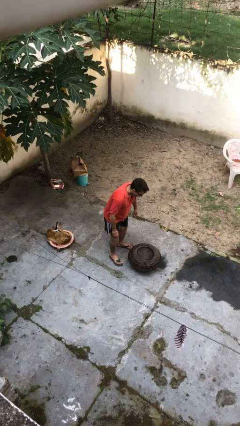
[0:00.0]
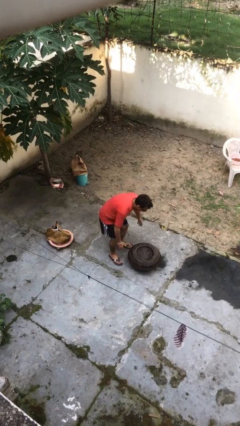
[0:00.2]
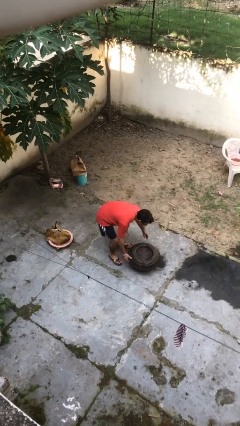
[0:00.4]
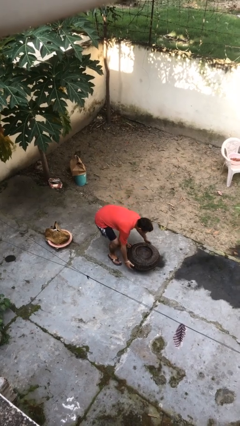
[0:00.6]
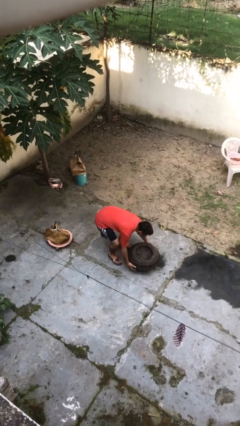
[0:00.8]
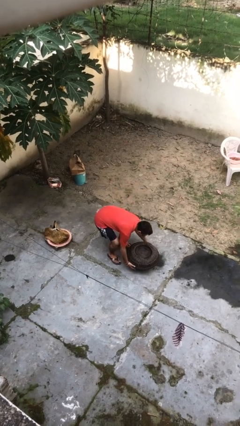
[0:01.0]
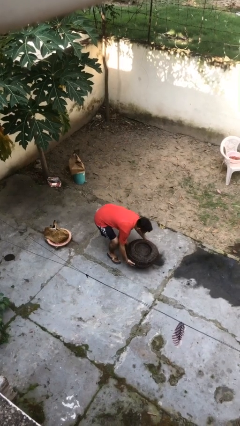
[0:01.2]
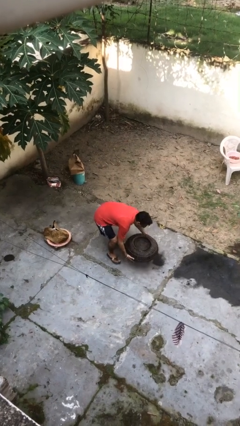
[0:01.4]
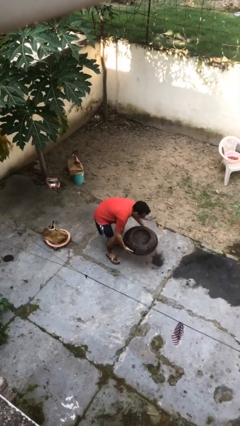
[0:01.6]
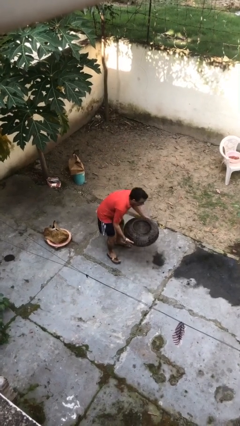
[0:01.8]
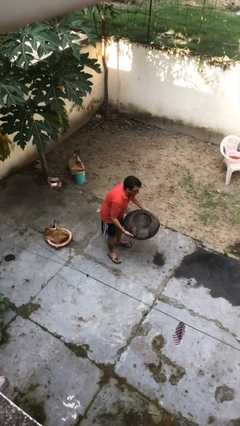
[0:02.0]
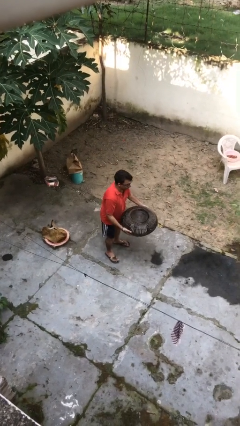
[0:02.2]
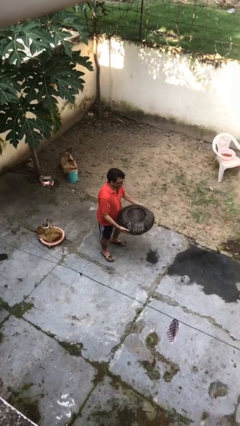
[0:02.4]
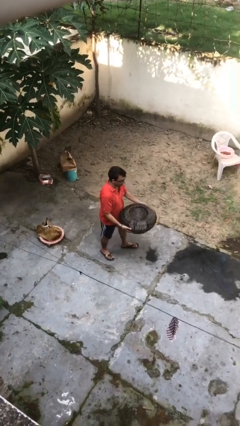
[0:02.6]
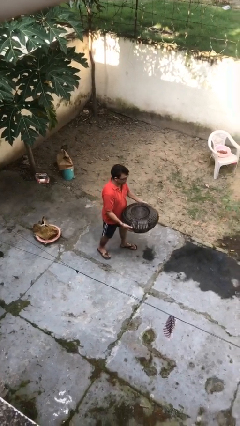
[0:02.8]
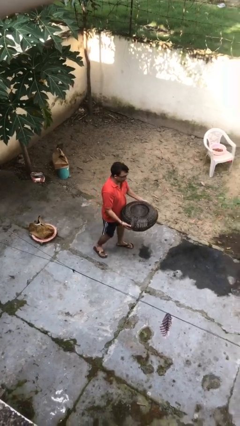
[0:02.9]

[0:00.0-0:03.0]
person picks up object from floor

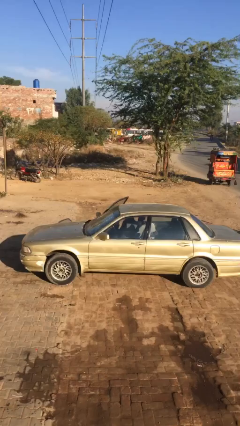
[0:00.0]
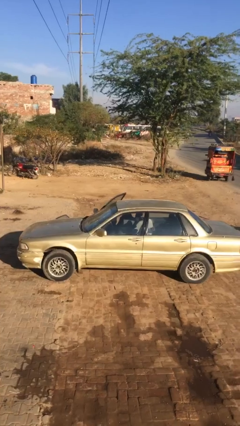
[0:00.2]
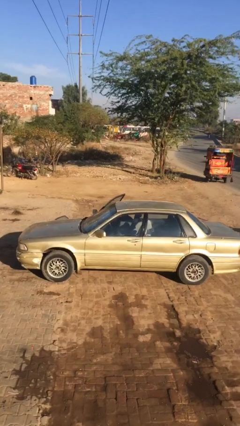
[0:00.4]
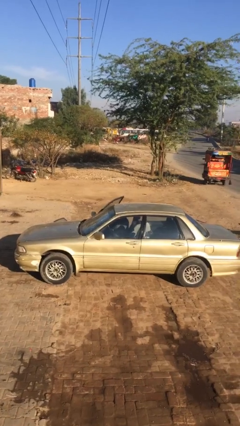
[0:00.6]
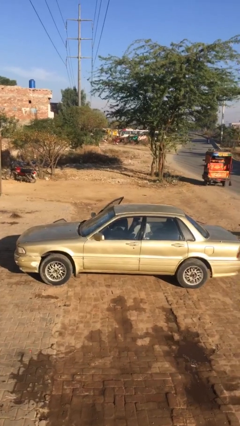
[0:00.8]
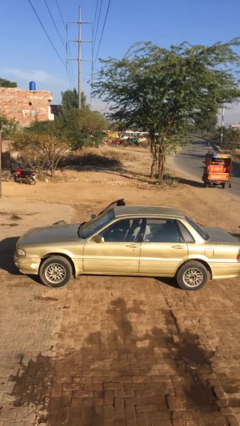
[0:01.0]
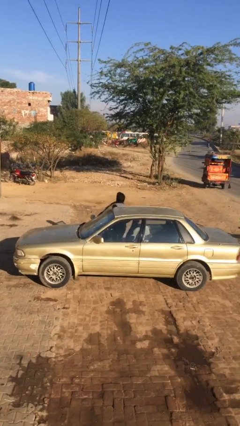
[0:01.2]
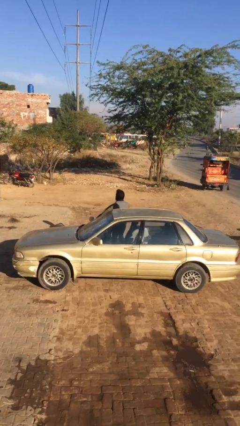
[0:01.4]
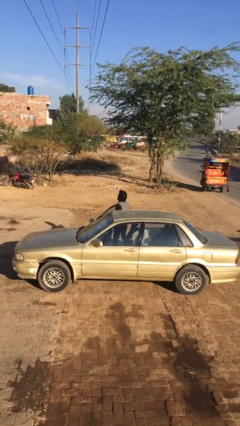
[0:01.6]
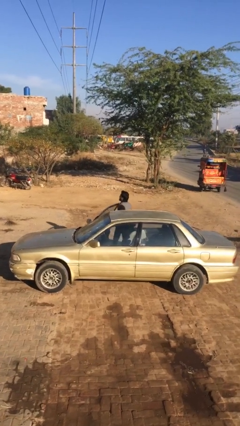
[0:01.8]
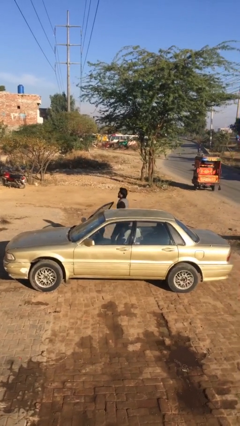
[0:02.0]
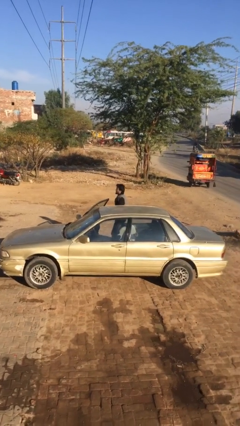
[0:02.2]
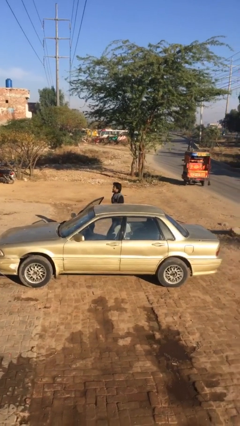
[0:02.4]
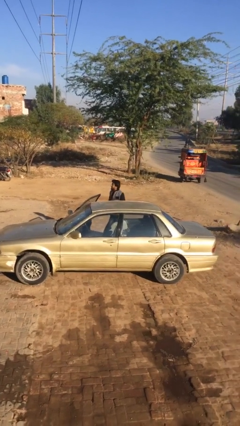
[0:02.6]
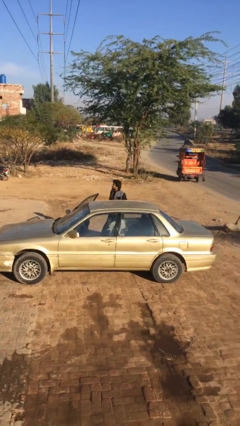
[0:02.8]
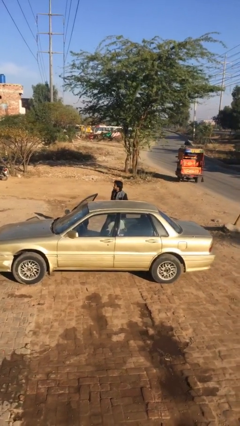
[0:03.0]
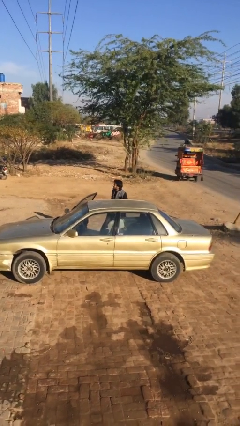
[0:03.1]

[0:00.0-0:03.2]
person exits car

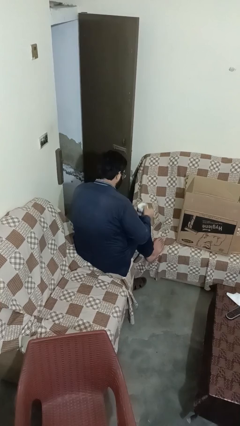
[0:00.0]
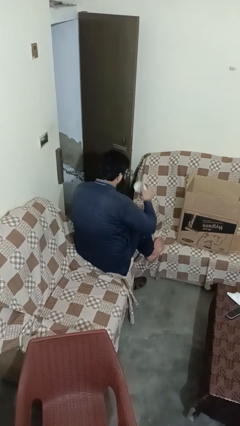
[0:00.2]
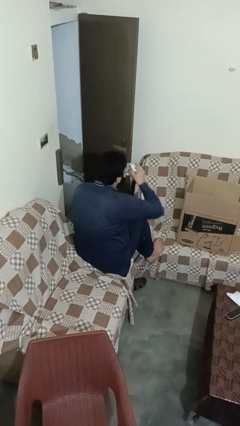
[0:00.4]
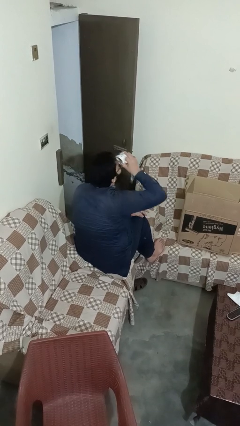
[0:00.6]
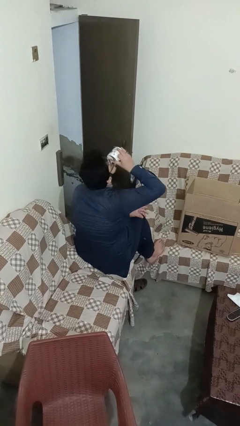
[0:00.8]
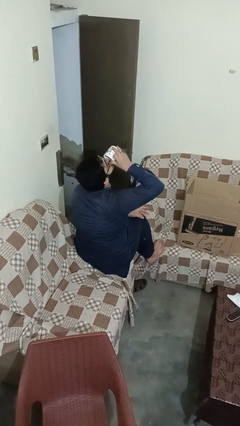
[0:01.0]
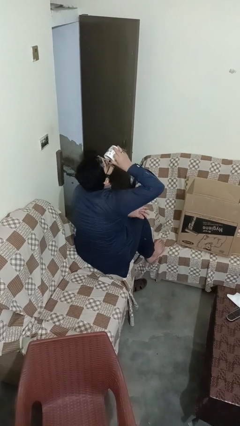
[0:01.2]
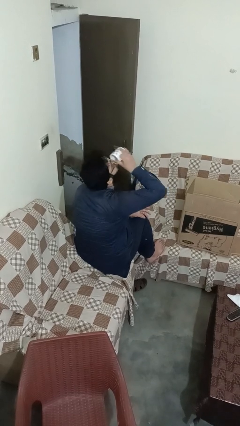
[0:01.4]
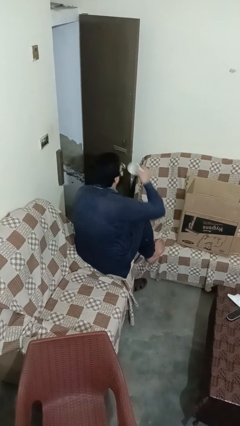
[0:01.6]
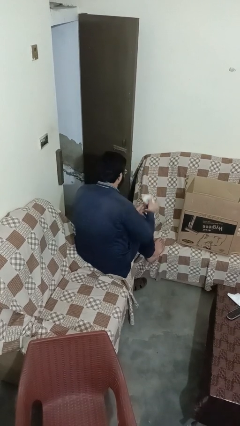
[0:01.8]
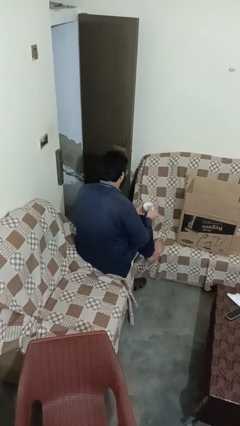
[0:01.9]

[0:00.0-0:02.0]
person drinks from mug

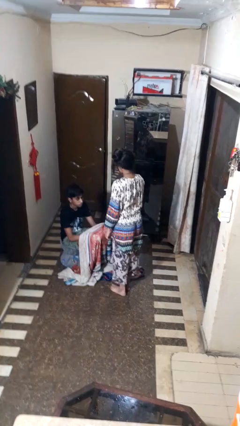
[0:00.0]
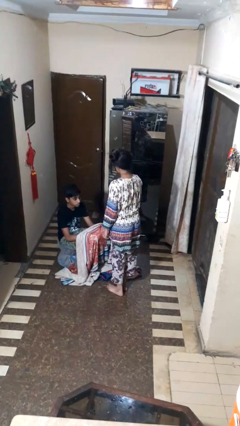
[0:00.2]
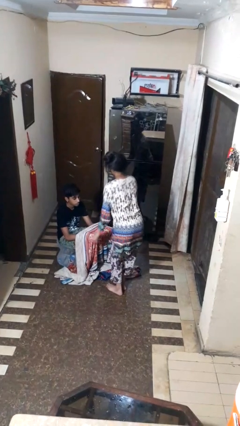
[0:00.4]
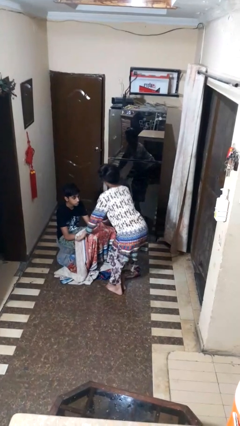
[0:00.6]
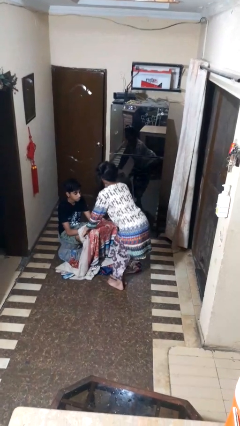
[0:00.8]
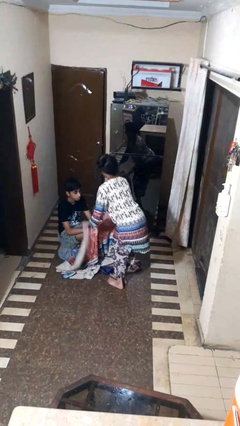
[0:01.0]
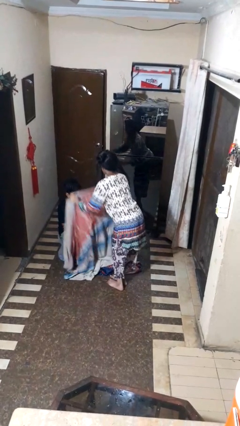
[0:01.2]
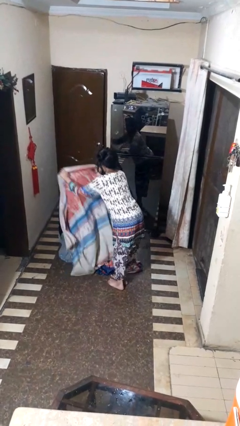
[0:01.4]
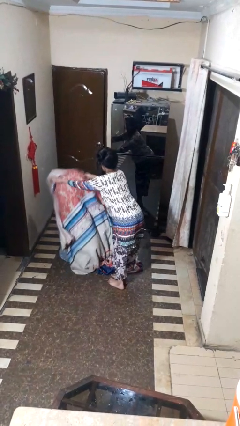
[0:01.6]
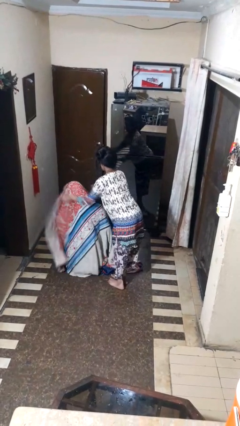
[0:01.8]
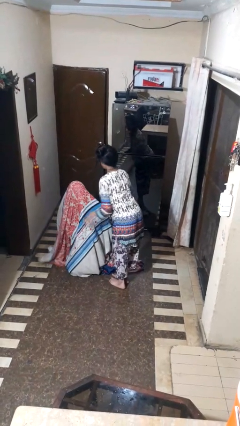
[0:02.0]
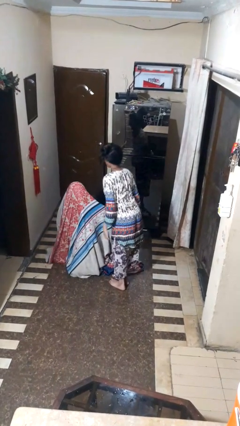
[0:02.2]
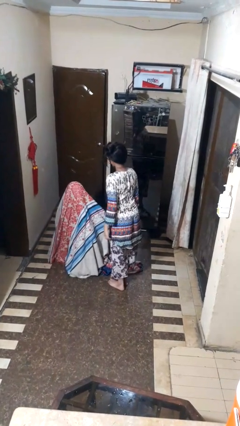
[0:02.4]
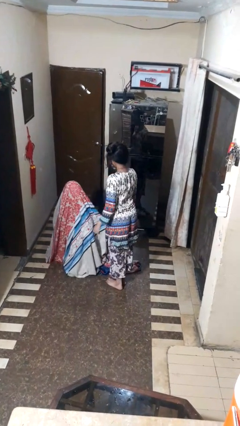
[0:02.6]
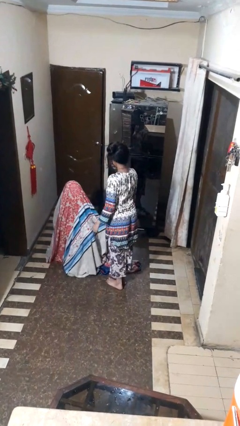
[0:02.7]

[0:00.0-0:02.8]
person covers friend with blanket

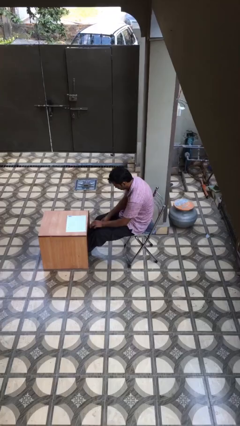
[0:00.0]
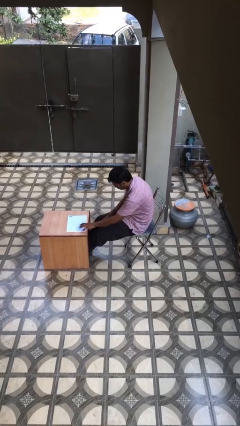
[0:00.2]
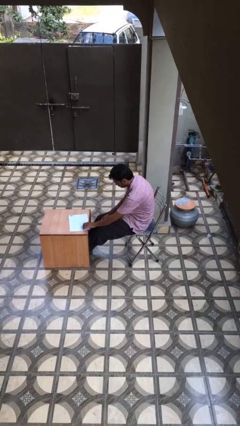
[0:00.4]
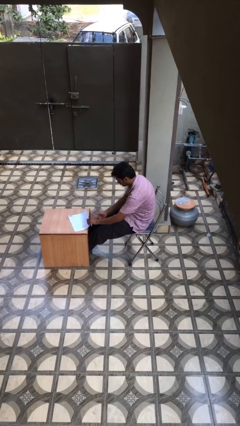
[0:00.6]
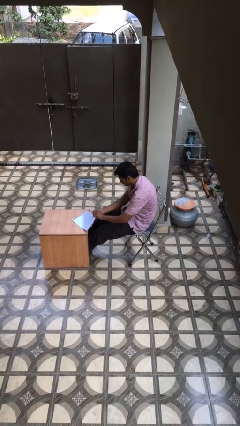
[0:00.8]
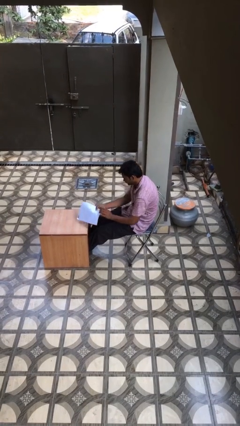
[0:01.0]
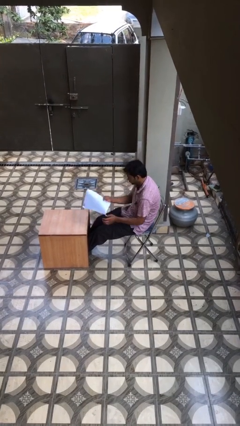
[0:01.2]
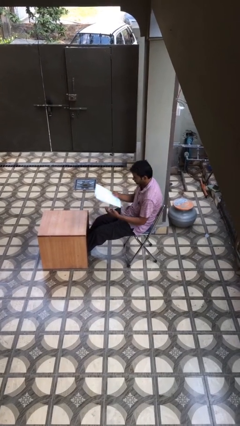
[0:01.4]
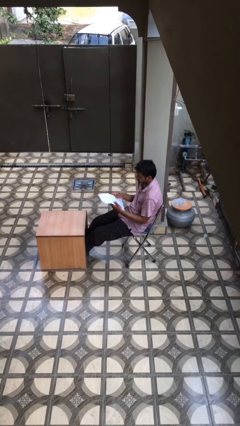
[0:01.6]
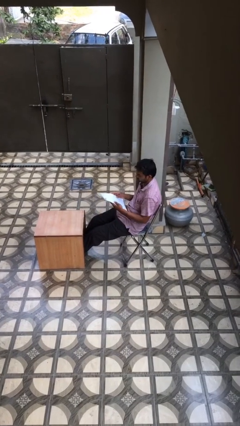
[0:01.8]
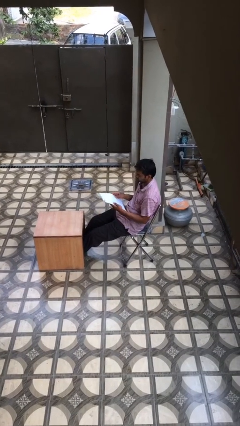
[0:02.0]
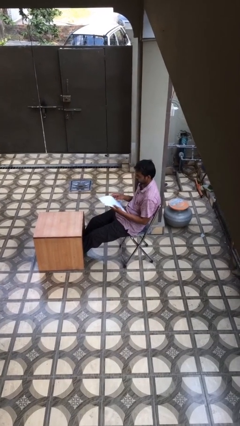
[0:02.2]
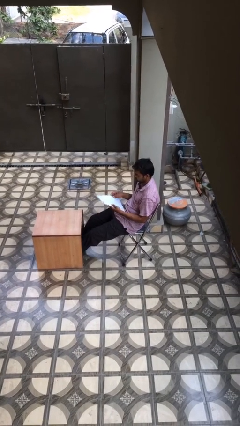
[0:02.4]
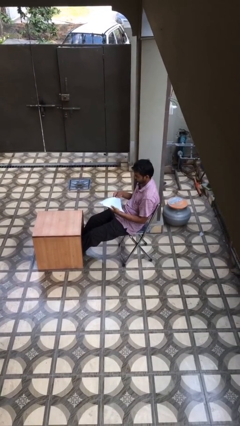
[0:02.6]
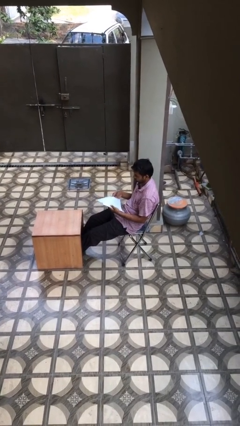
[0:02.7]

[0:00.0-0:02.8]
person picks up object from table

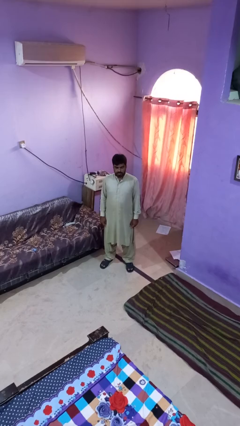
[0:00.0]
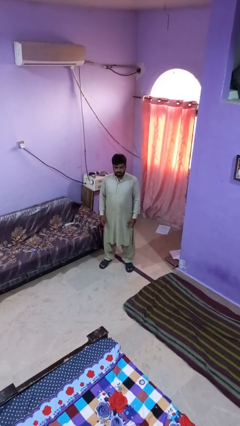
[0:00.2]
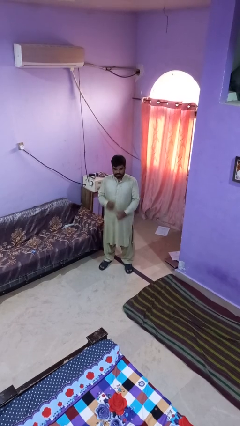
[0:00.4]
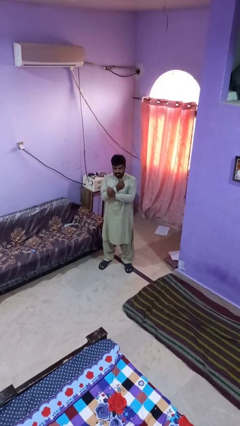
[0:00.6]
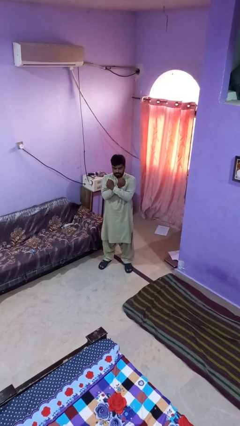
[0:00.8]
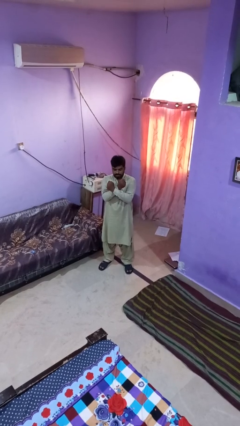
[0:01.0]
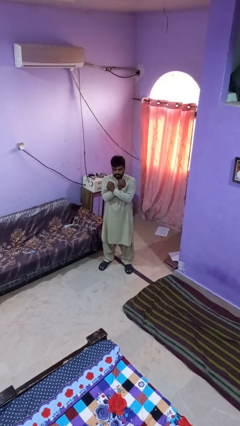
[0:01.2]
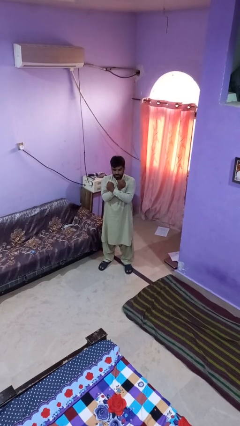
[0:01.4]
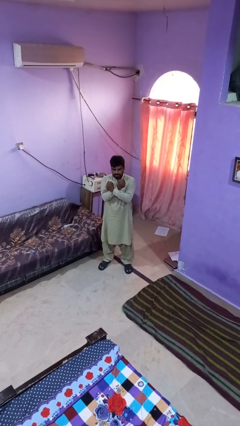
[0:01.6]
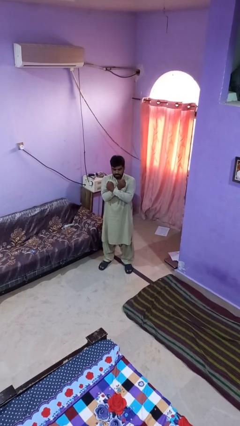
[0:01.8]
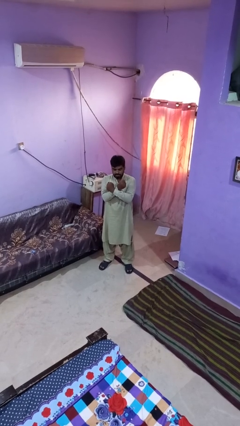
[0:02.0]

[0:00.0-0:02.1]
person gestures arms x

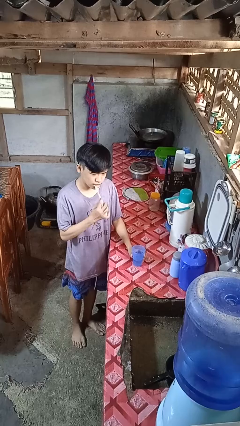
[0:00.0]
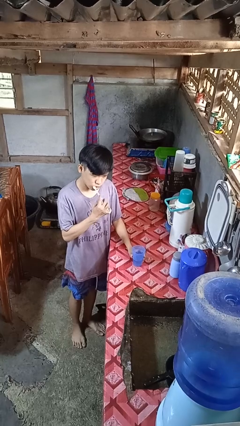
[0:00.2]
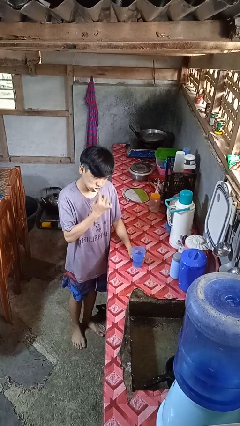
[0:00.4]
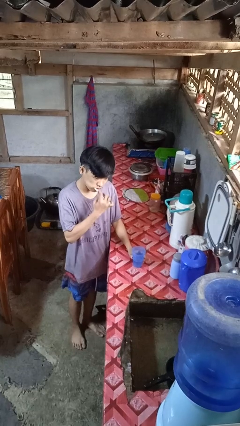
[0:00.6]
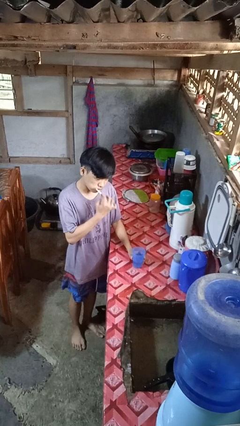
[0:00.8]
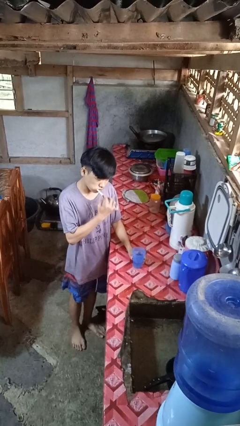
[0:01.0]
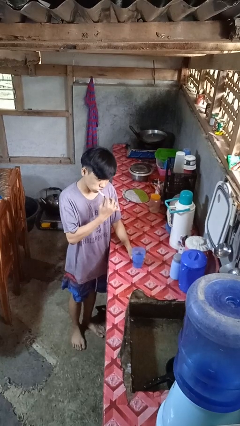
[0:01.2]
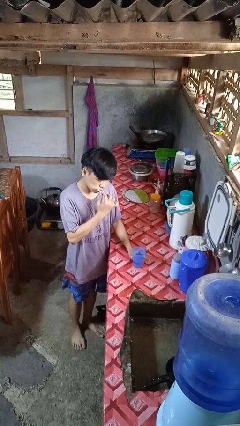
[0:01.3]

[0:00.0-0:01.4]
person brushes teeth
